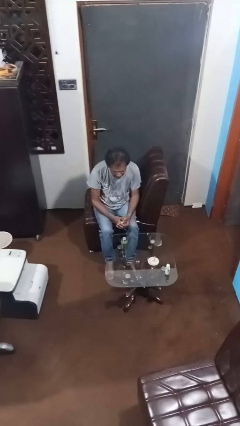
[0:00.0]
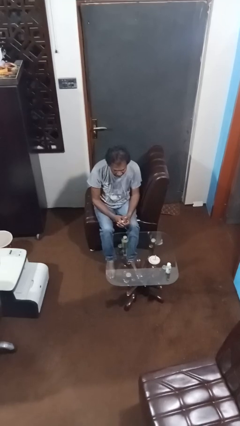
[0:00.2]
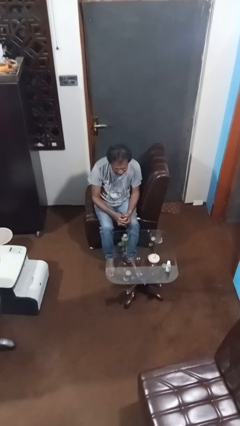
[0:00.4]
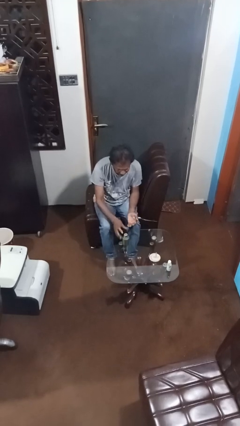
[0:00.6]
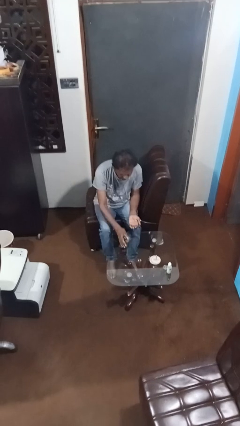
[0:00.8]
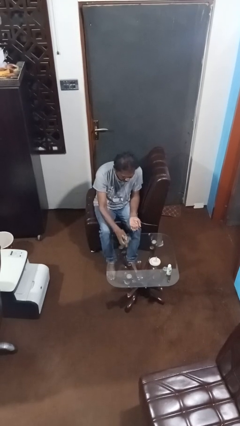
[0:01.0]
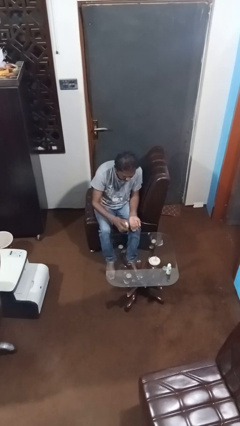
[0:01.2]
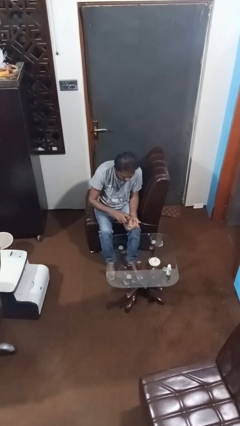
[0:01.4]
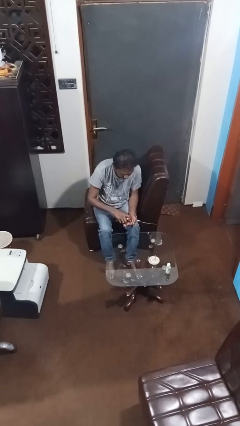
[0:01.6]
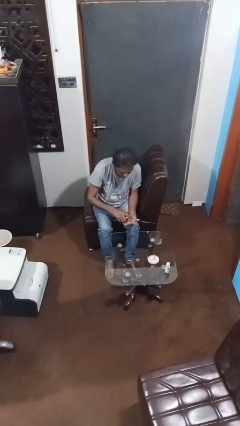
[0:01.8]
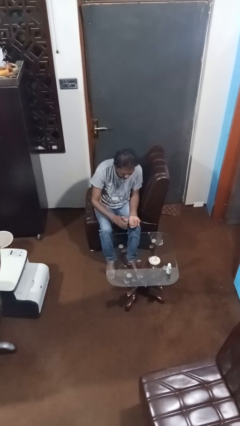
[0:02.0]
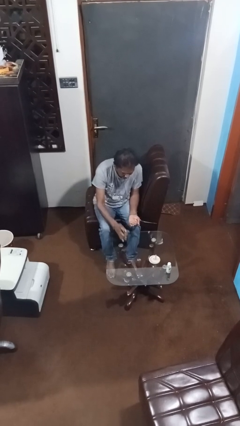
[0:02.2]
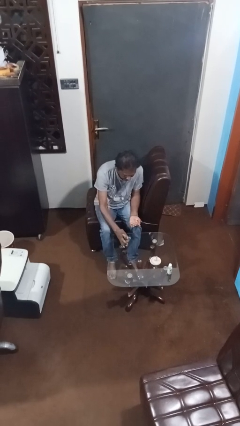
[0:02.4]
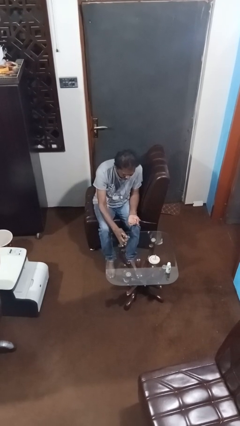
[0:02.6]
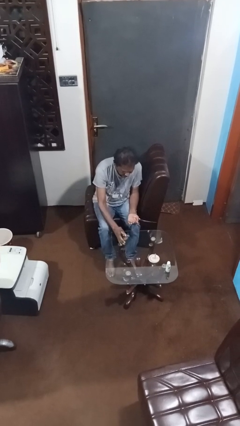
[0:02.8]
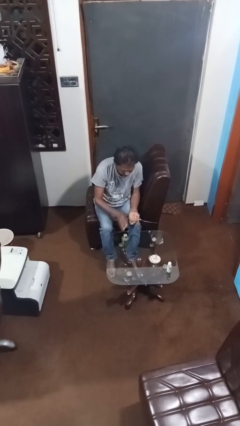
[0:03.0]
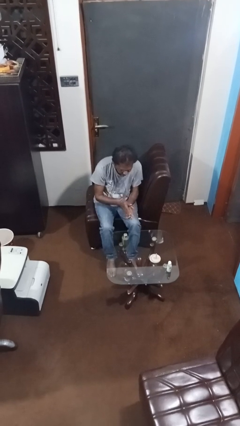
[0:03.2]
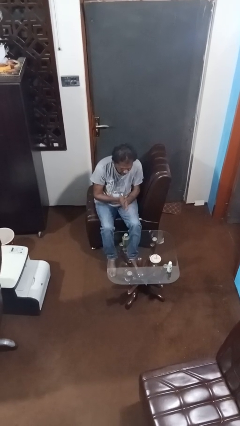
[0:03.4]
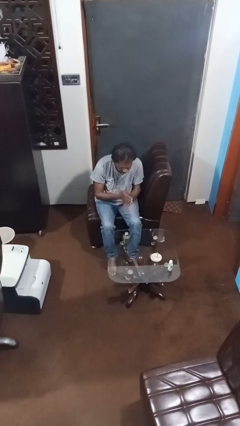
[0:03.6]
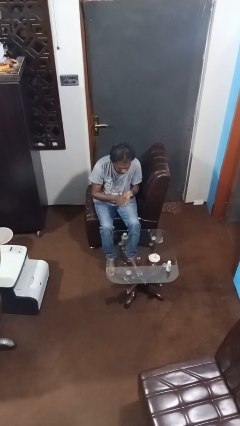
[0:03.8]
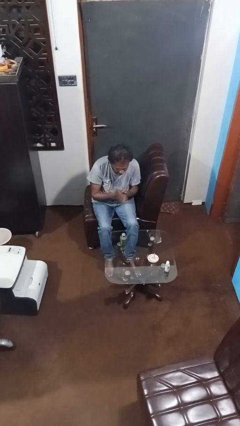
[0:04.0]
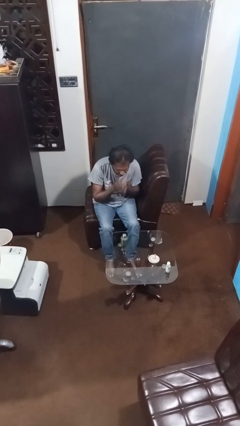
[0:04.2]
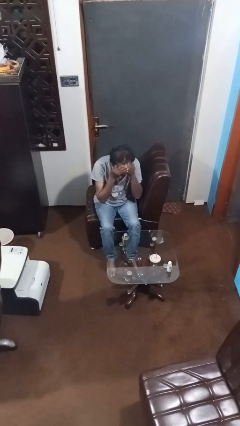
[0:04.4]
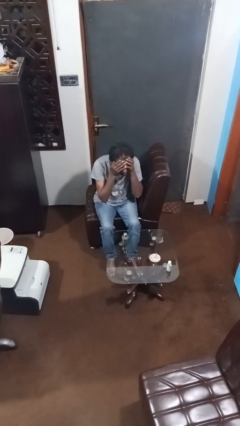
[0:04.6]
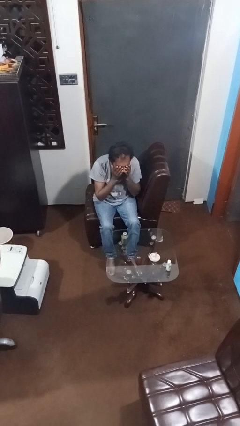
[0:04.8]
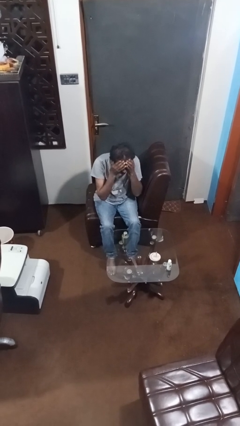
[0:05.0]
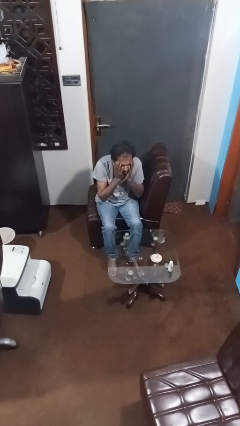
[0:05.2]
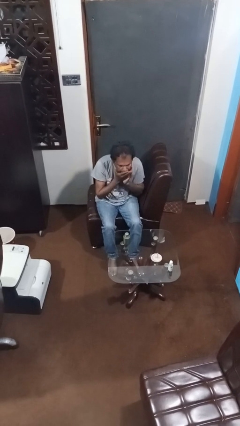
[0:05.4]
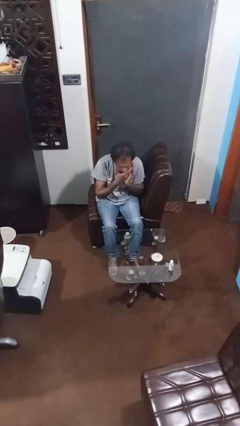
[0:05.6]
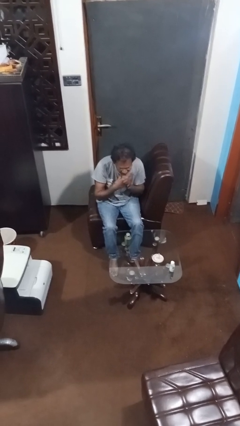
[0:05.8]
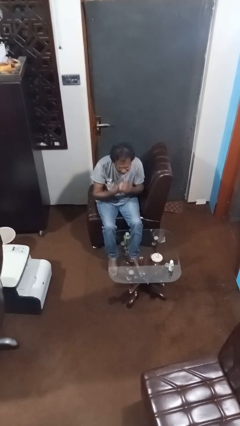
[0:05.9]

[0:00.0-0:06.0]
person applies facial moisturizer

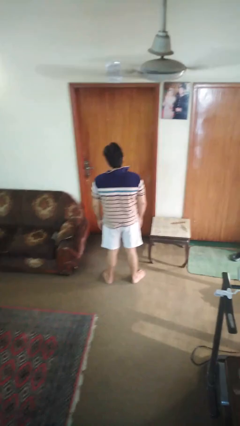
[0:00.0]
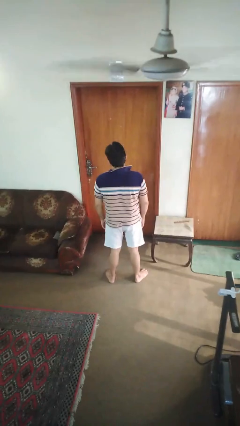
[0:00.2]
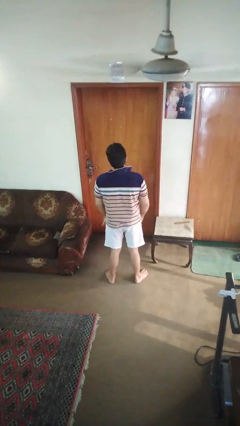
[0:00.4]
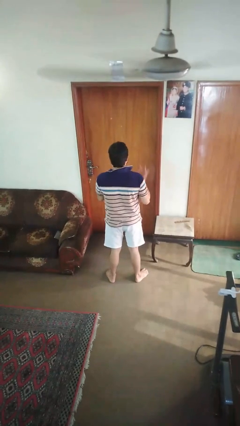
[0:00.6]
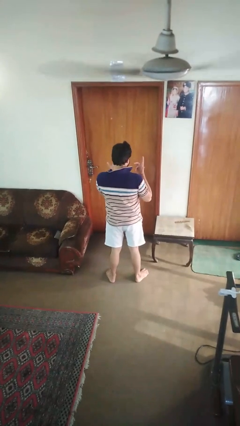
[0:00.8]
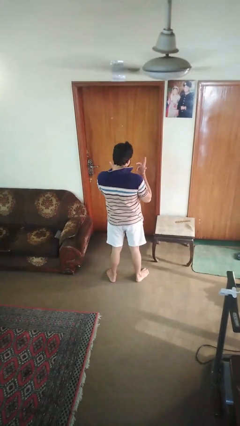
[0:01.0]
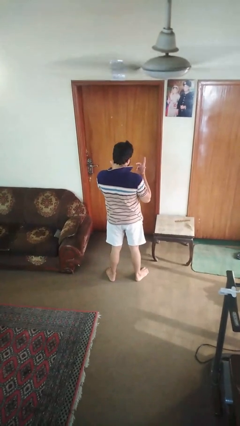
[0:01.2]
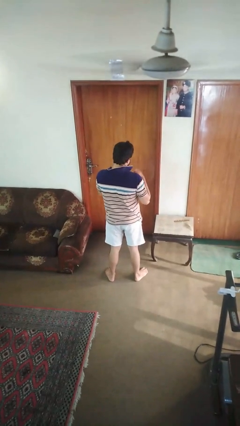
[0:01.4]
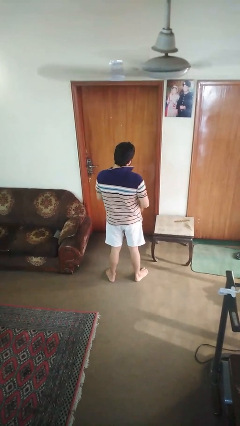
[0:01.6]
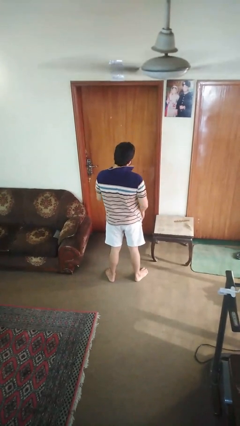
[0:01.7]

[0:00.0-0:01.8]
person shrugs

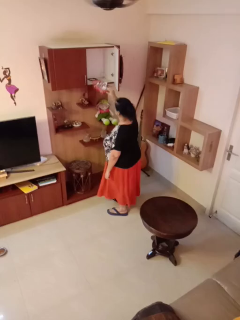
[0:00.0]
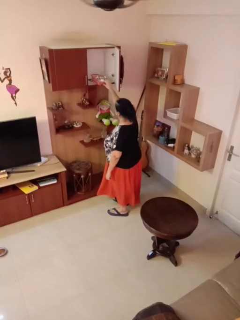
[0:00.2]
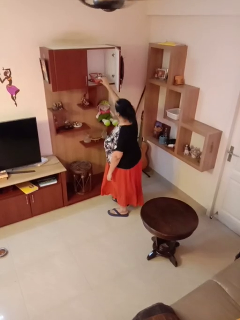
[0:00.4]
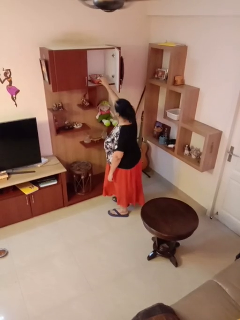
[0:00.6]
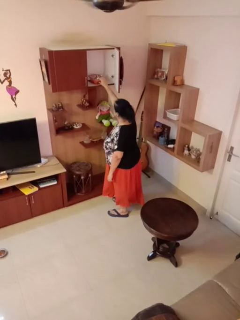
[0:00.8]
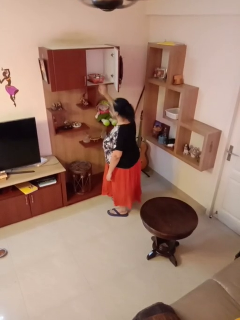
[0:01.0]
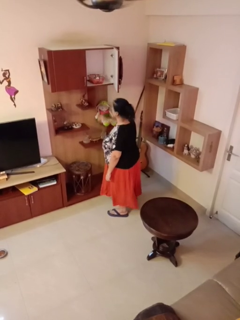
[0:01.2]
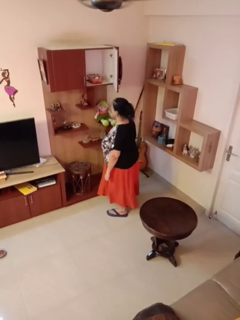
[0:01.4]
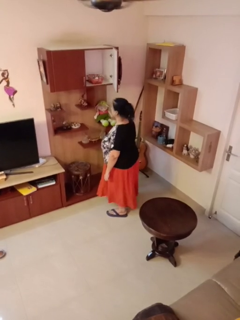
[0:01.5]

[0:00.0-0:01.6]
person puts down object into cabinet

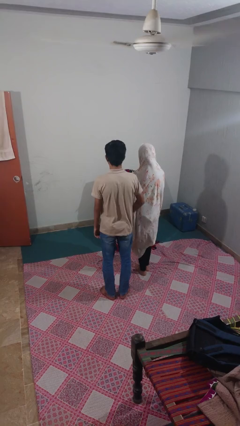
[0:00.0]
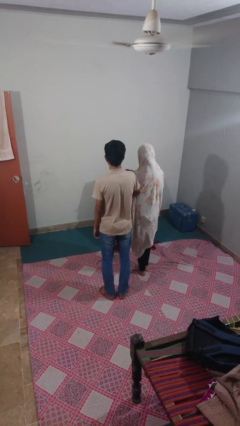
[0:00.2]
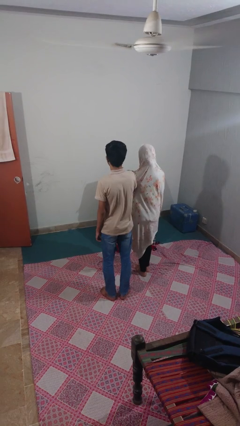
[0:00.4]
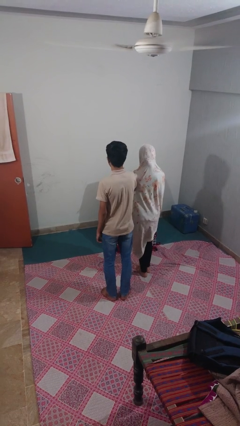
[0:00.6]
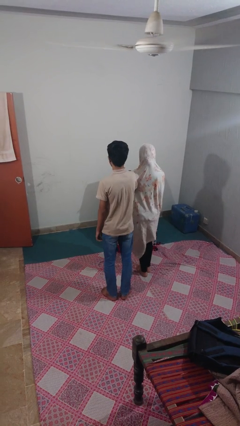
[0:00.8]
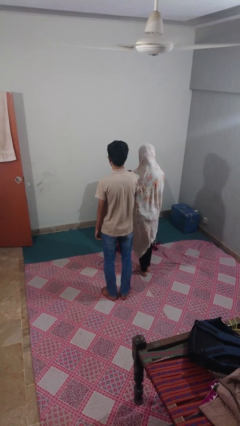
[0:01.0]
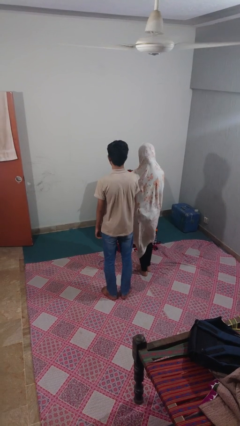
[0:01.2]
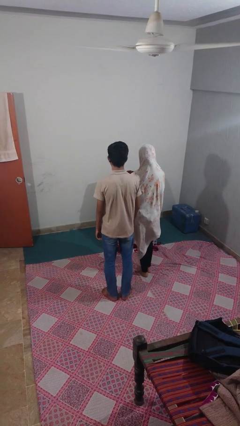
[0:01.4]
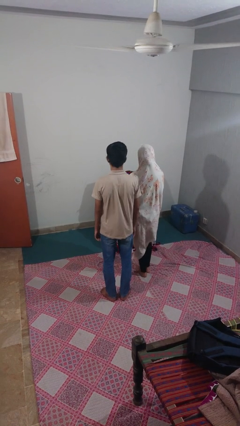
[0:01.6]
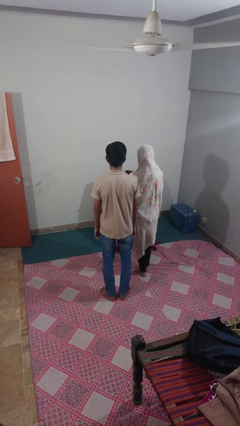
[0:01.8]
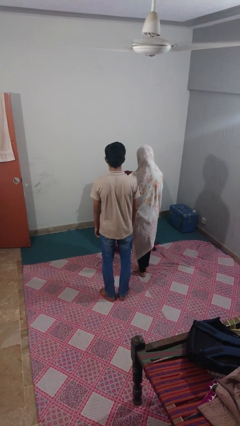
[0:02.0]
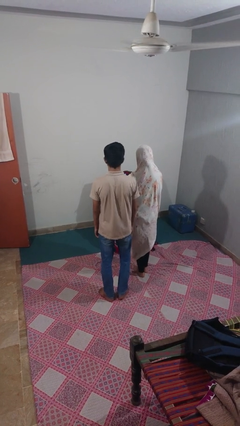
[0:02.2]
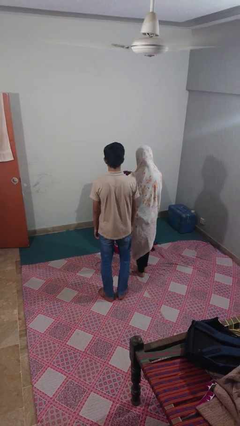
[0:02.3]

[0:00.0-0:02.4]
person nudges person with elbow

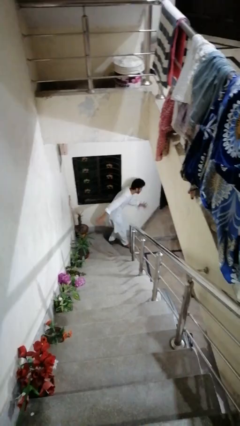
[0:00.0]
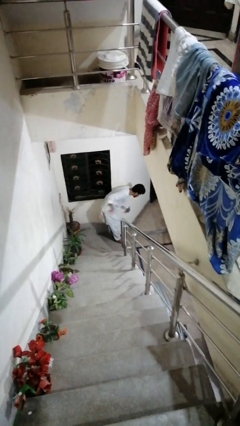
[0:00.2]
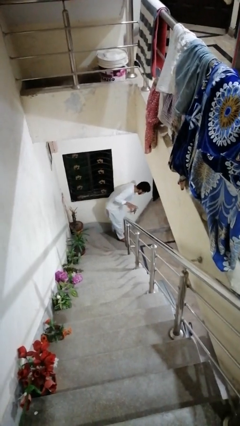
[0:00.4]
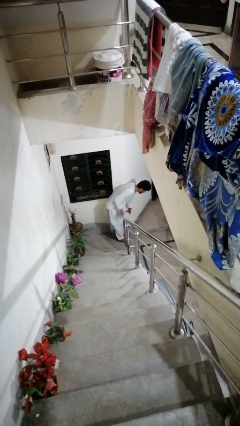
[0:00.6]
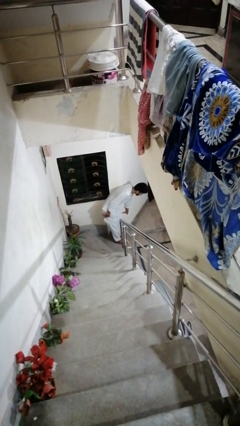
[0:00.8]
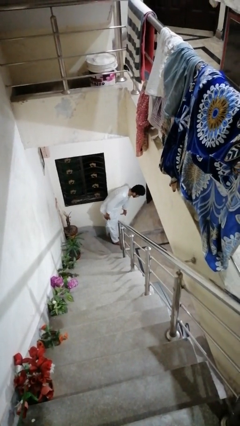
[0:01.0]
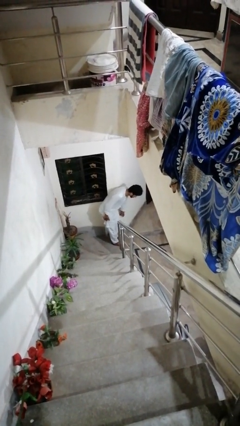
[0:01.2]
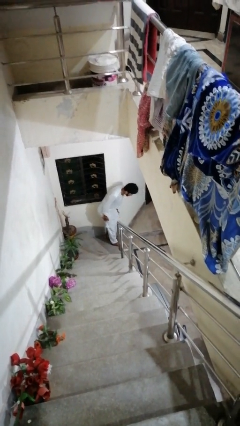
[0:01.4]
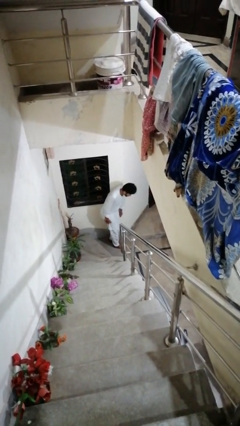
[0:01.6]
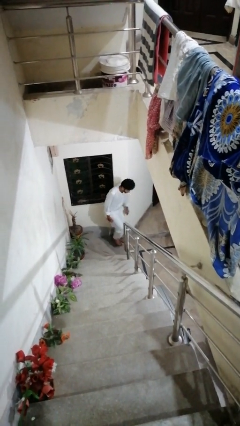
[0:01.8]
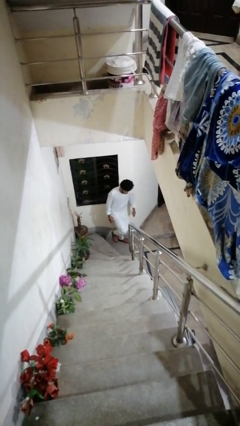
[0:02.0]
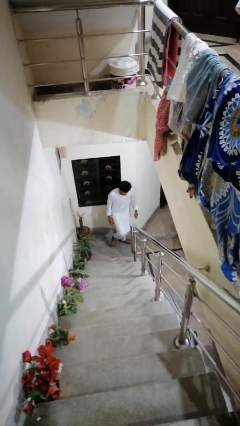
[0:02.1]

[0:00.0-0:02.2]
person trips on stair

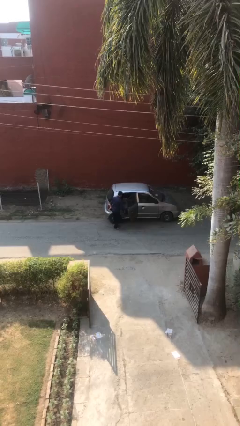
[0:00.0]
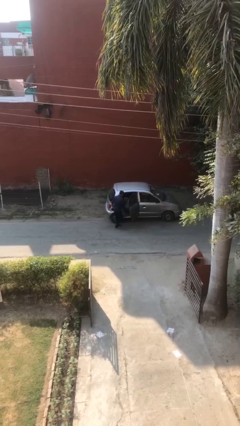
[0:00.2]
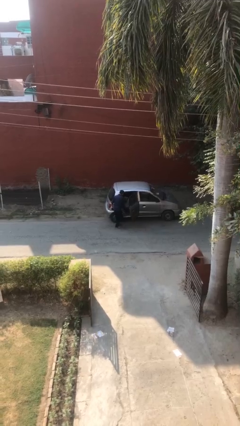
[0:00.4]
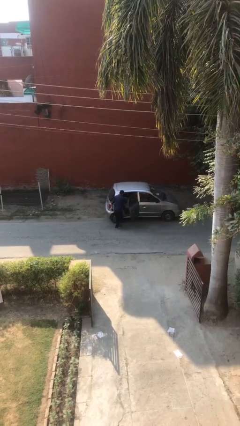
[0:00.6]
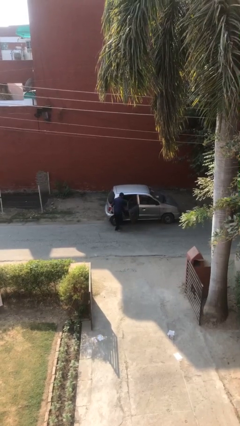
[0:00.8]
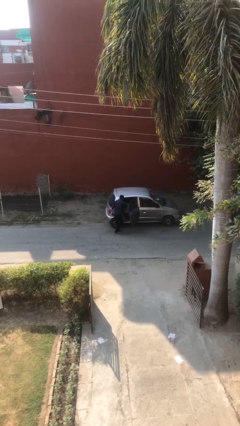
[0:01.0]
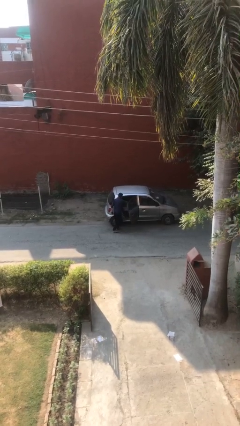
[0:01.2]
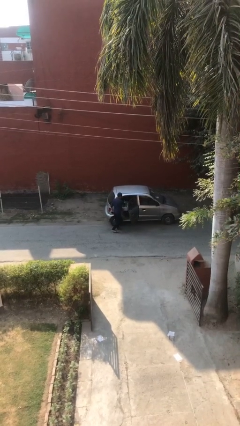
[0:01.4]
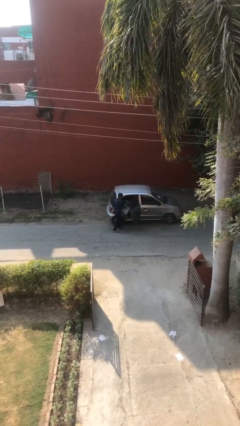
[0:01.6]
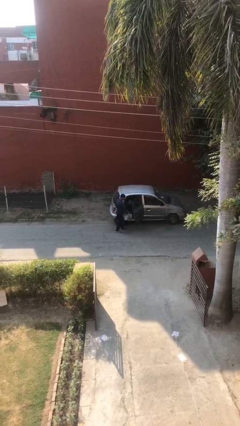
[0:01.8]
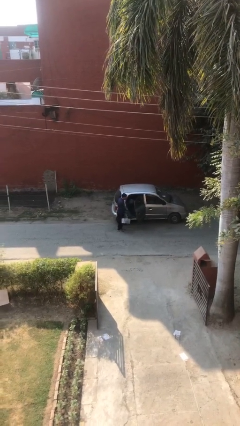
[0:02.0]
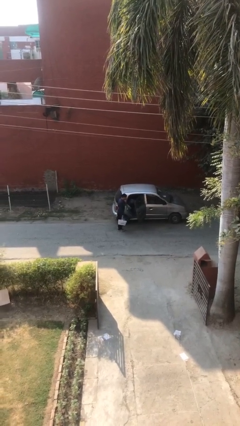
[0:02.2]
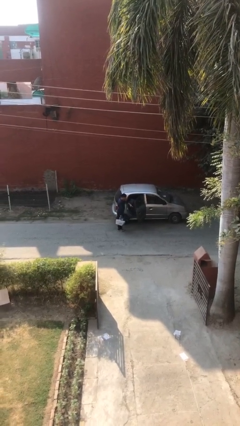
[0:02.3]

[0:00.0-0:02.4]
person unloads car

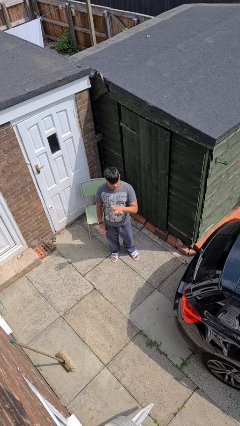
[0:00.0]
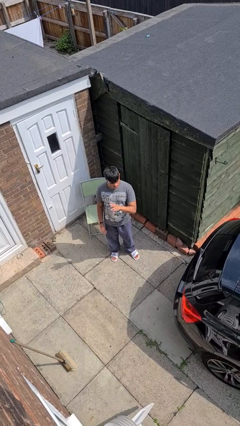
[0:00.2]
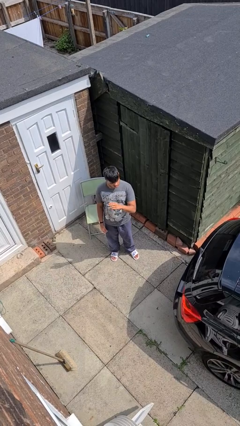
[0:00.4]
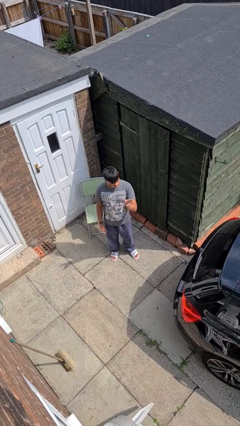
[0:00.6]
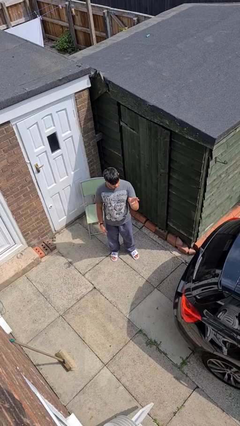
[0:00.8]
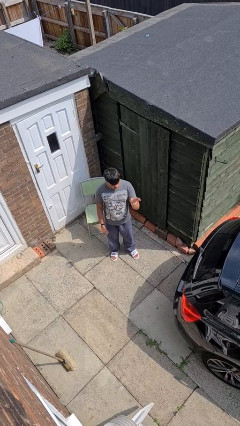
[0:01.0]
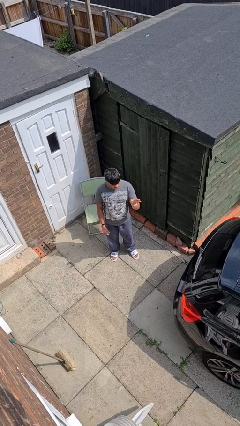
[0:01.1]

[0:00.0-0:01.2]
person gestures swipe left
